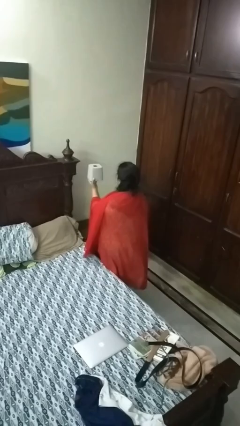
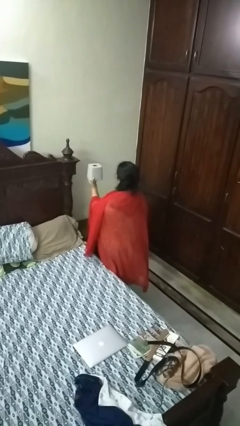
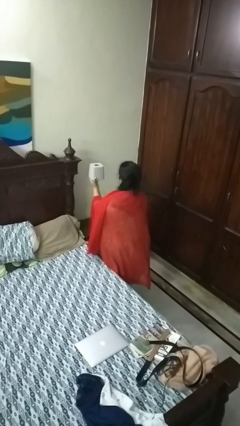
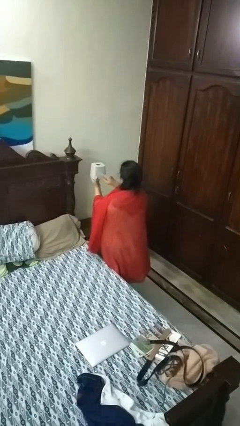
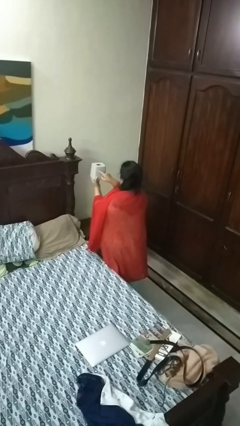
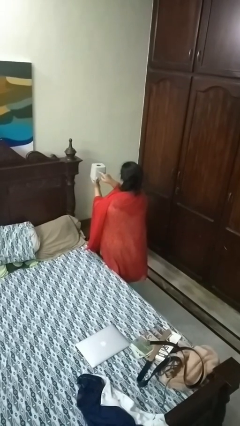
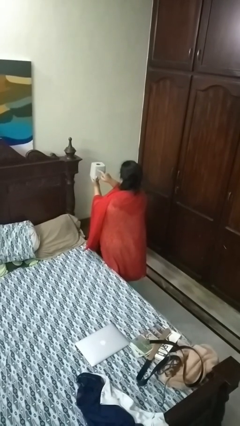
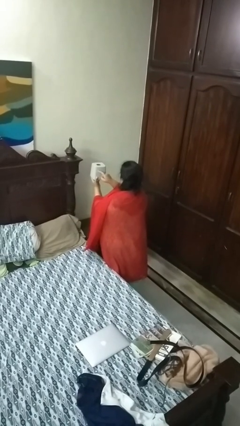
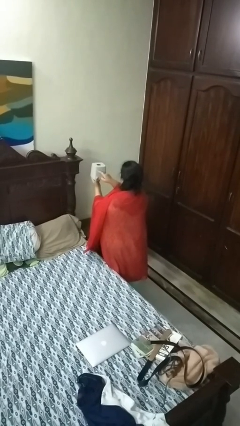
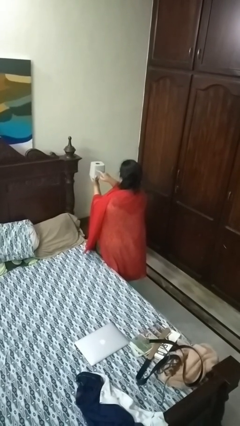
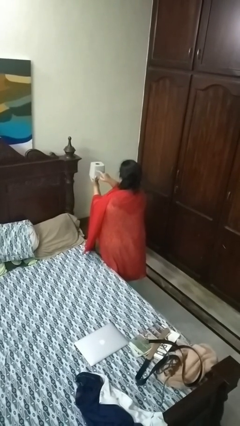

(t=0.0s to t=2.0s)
person taps object with finger

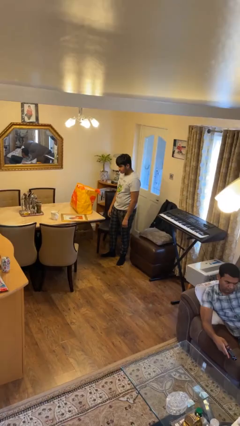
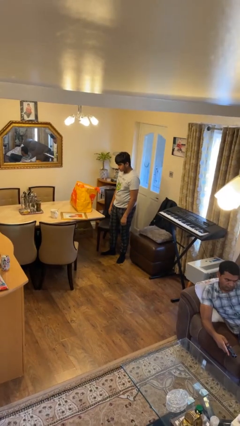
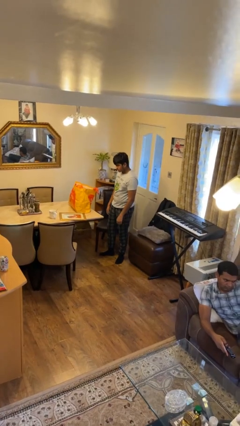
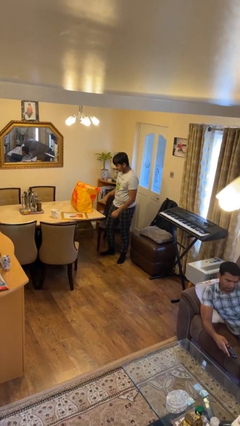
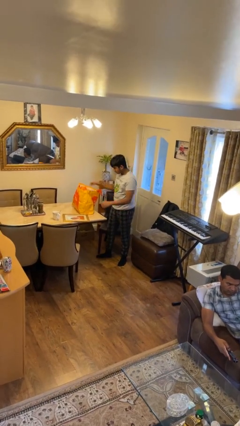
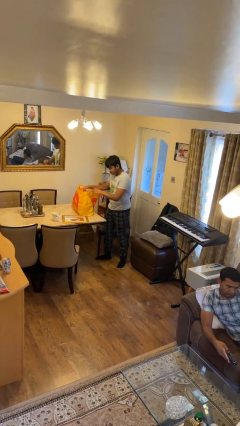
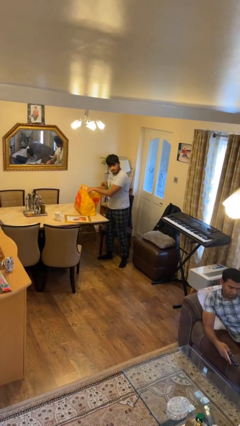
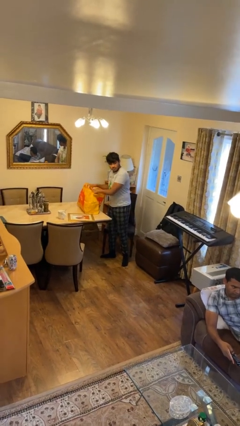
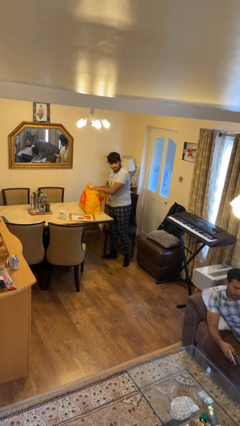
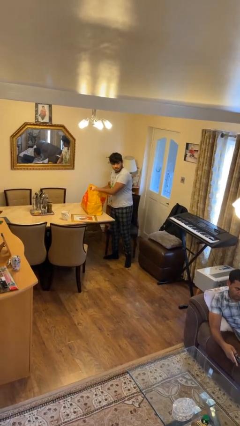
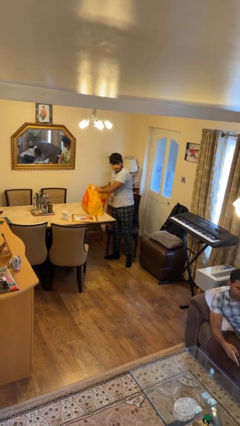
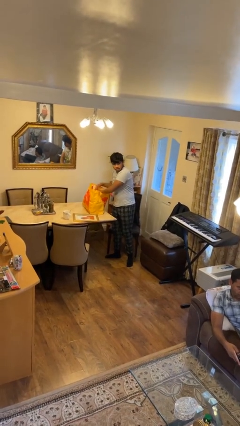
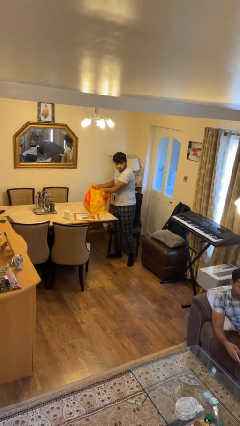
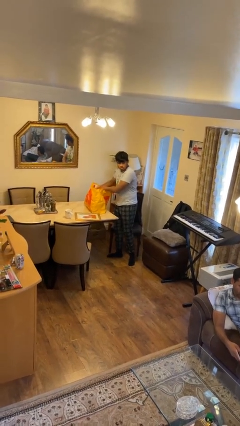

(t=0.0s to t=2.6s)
person searches in bag

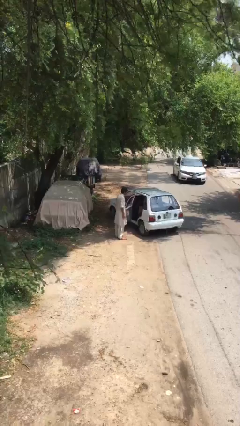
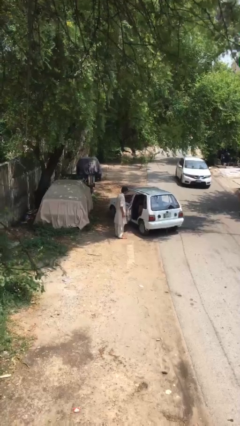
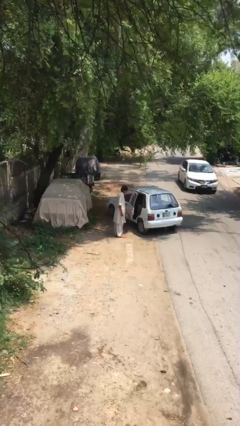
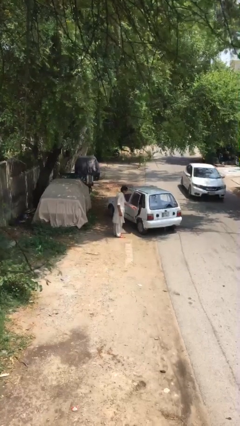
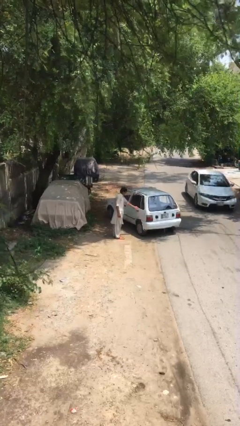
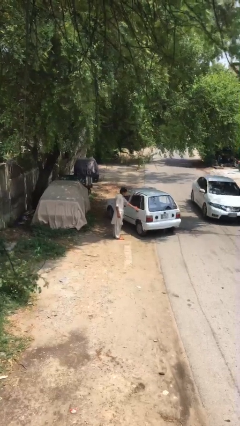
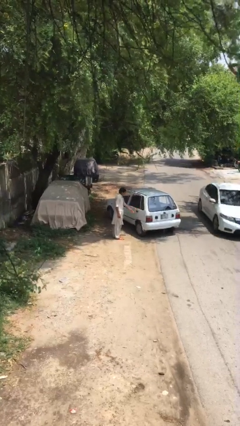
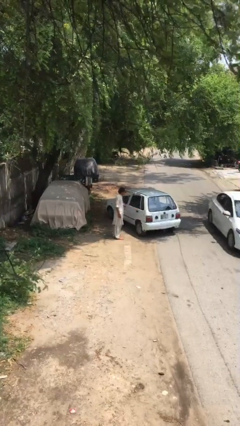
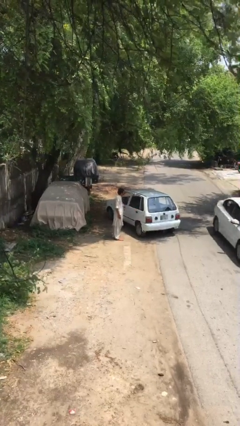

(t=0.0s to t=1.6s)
person closes car door

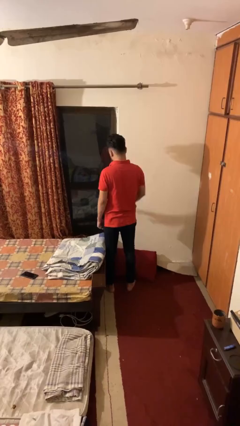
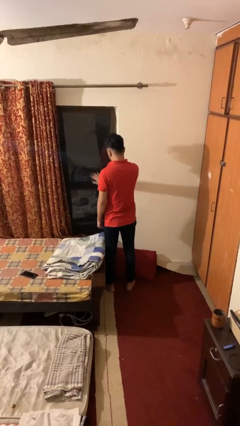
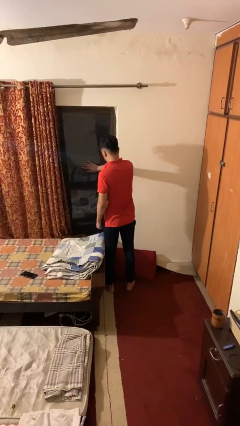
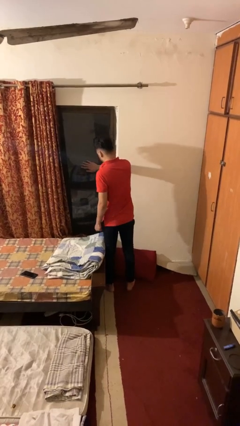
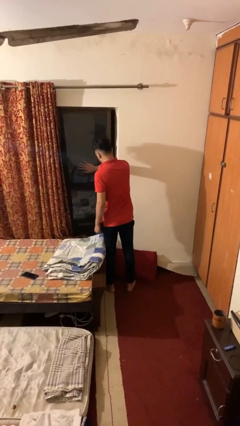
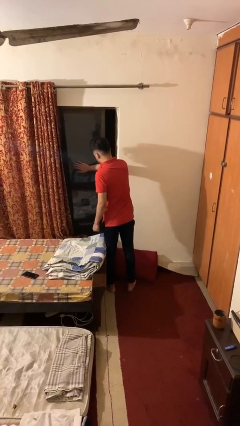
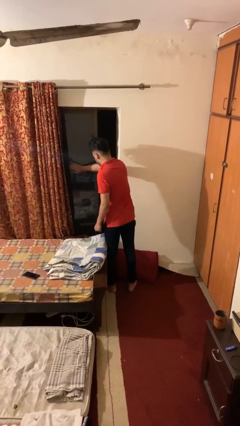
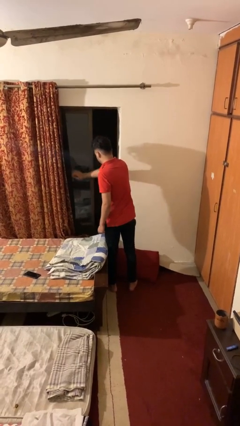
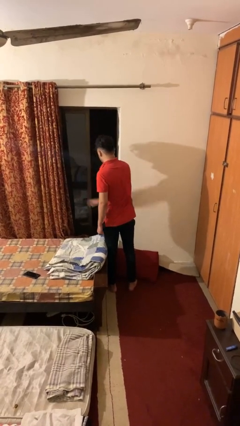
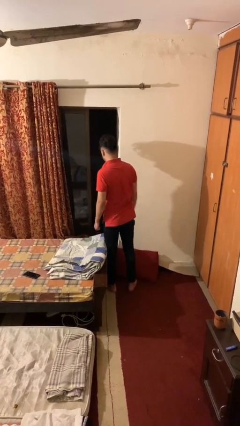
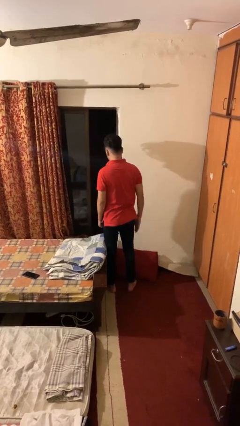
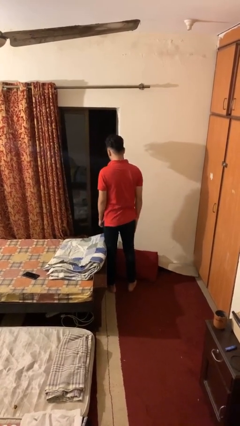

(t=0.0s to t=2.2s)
person opens home window

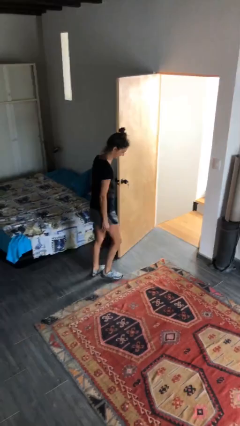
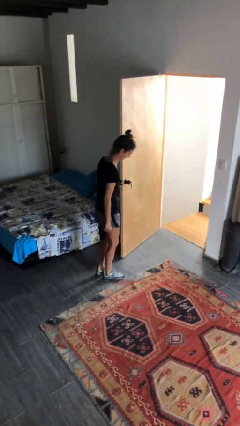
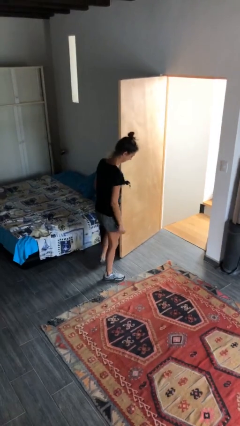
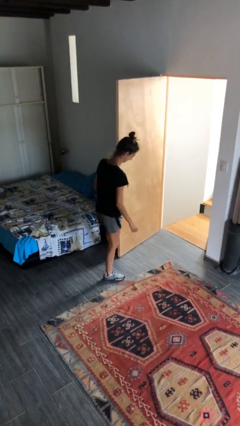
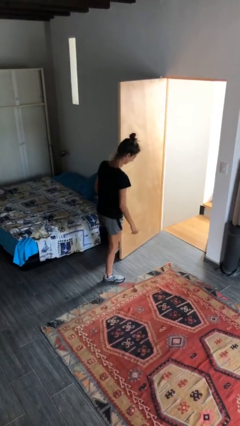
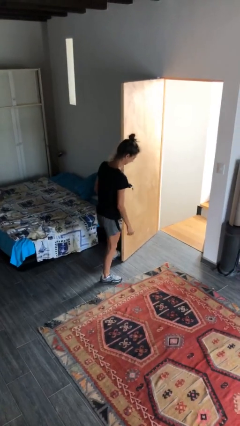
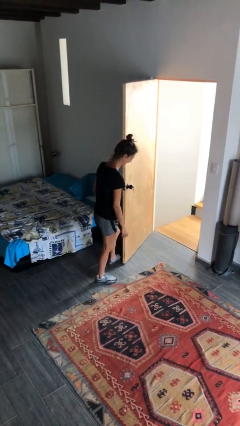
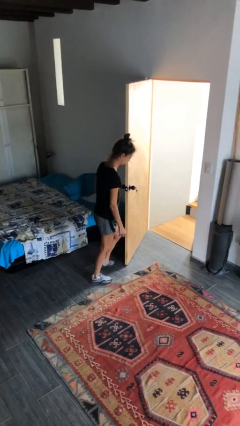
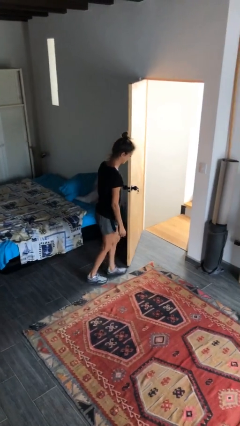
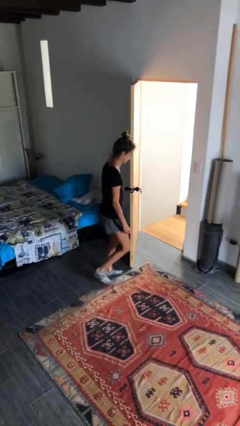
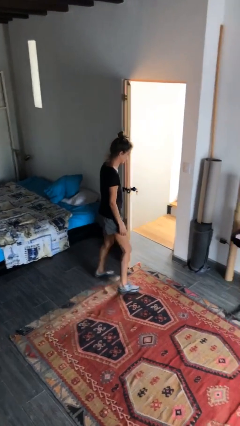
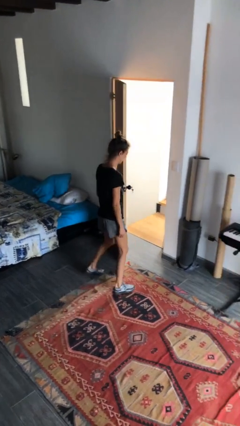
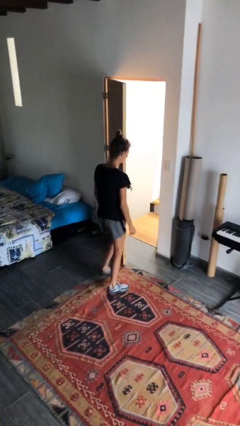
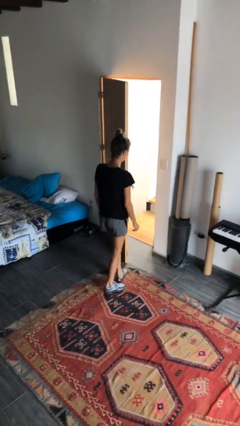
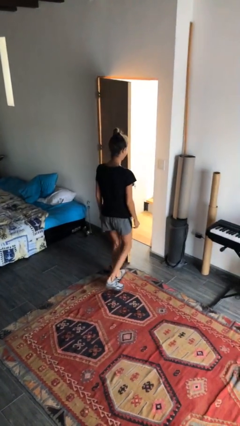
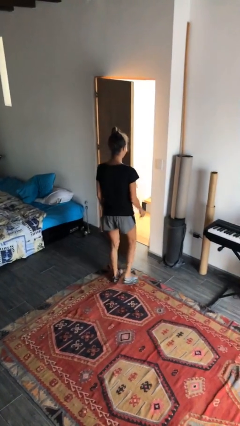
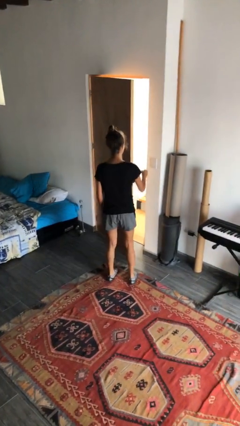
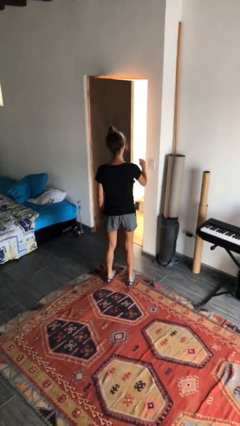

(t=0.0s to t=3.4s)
person closes door with foot

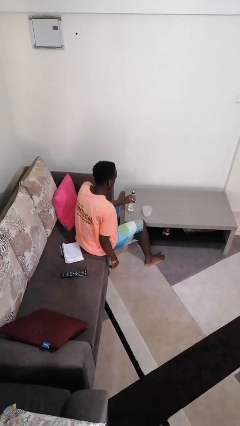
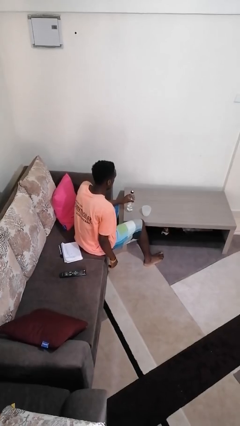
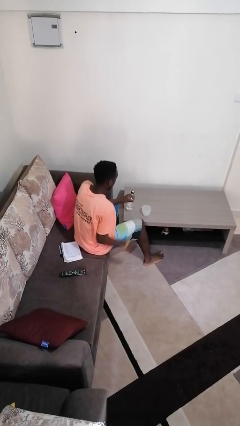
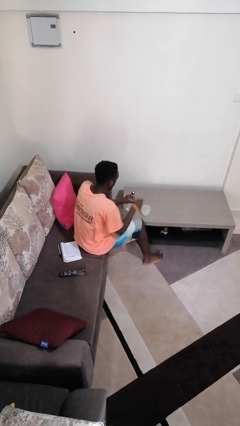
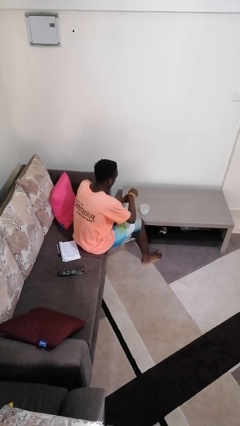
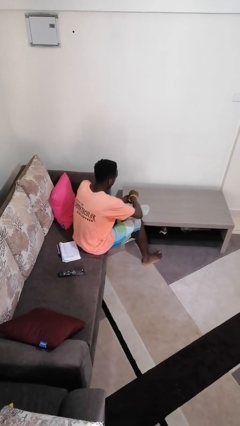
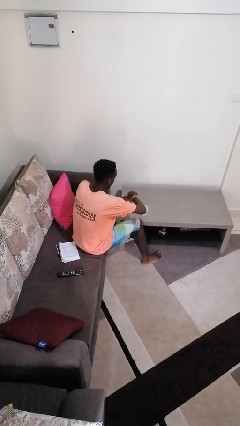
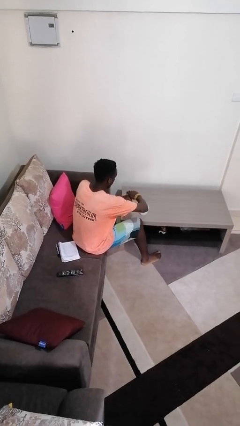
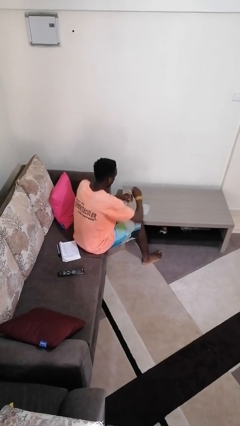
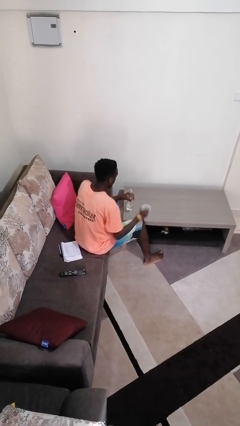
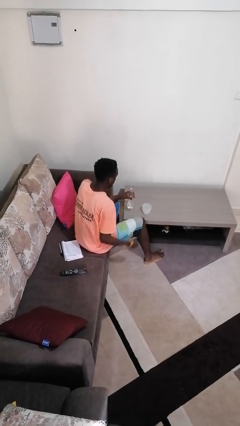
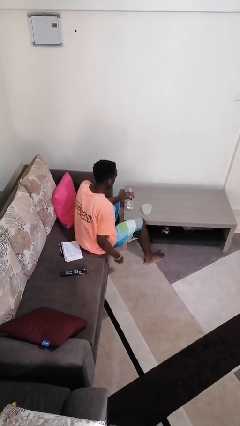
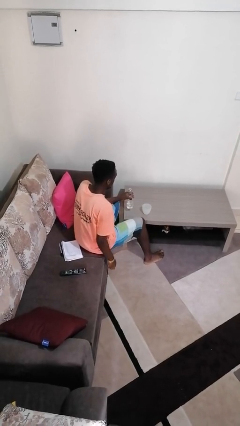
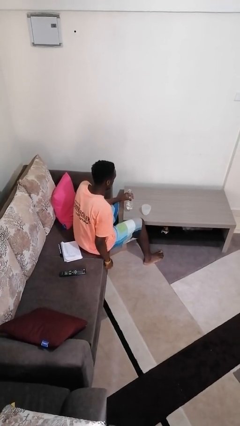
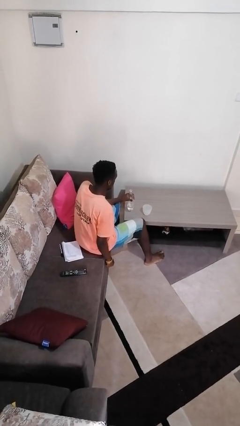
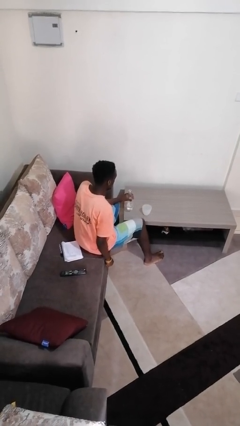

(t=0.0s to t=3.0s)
person unscrews lid from bottle

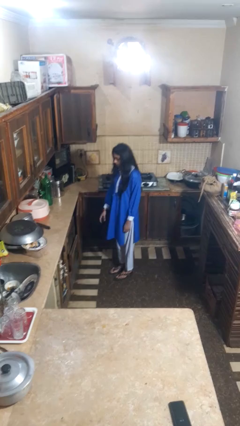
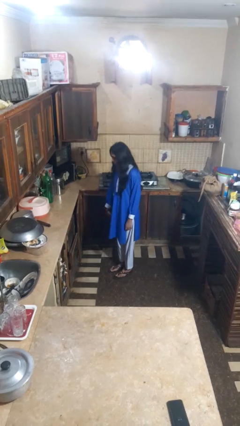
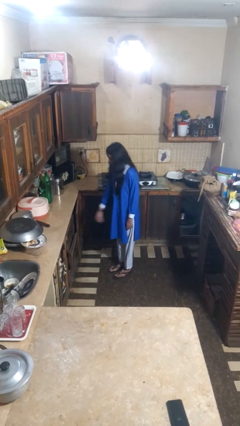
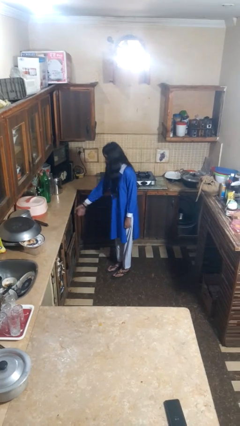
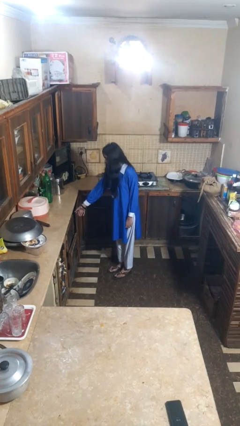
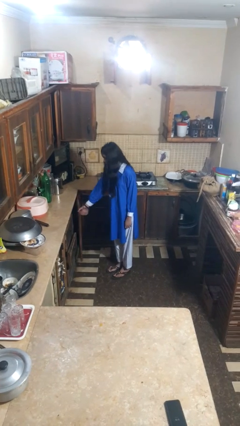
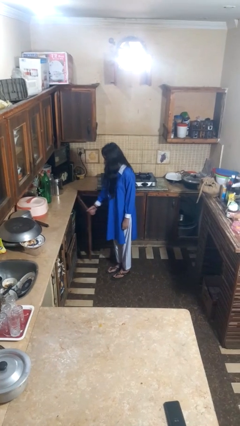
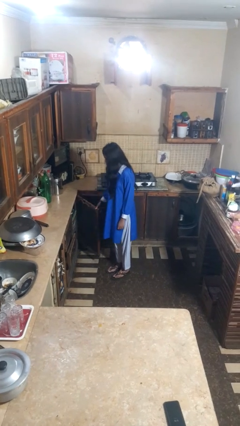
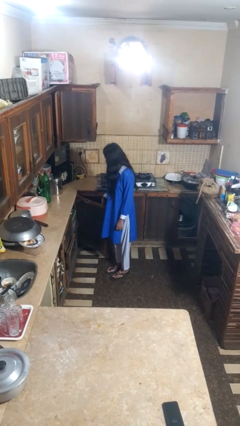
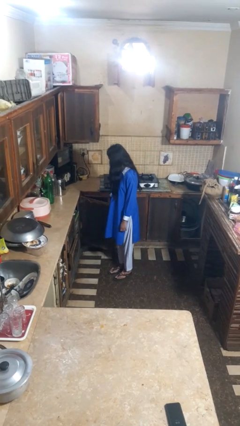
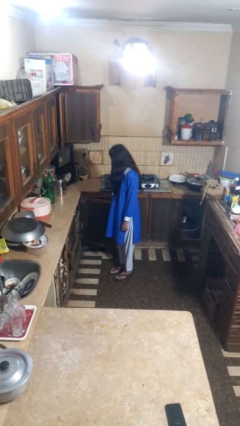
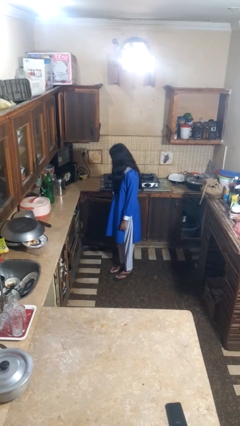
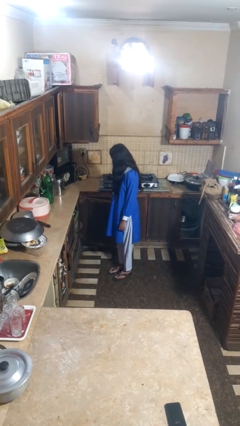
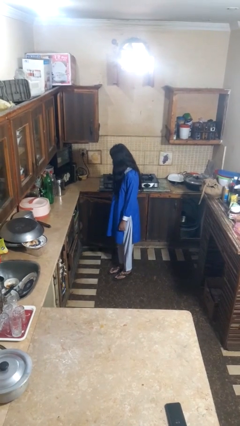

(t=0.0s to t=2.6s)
person opens closet door
